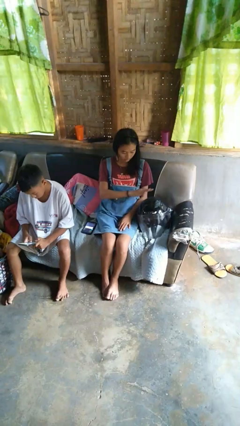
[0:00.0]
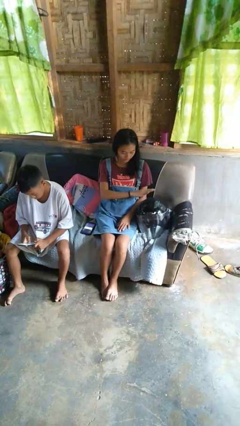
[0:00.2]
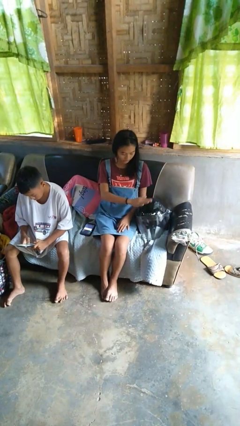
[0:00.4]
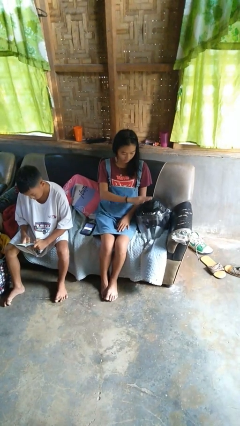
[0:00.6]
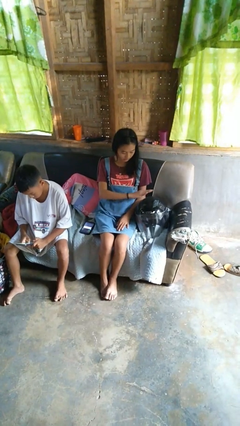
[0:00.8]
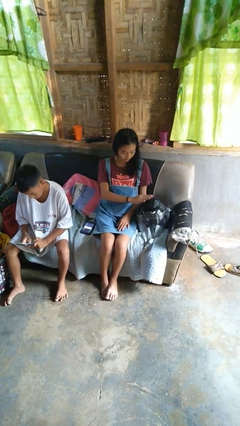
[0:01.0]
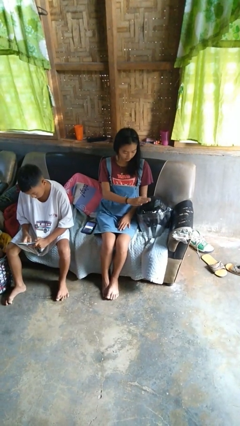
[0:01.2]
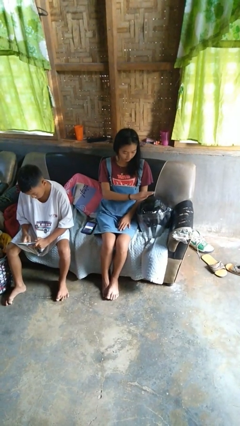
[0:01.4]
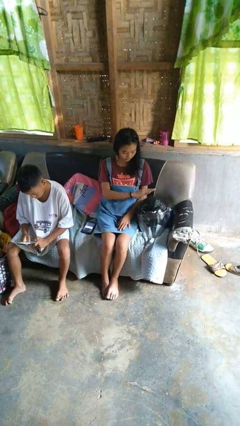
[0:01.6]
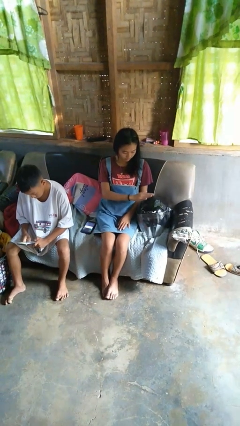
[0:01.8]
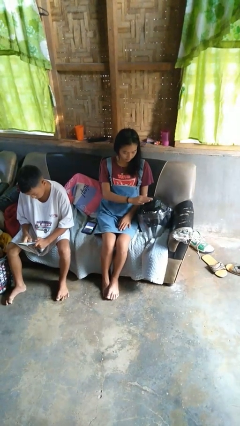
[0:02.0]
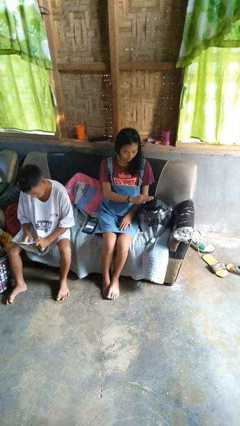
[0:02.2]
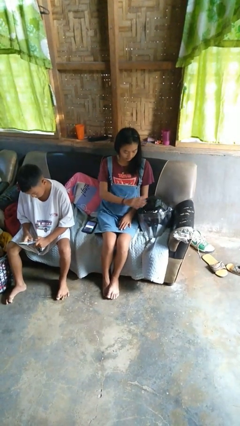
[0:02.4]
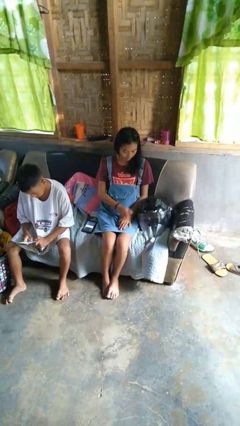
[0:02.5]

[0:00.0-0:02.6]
person waves hand over object

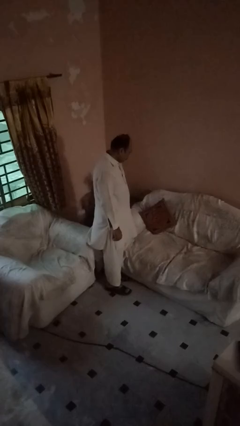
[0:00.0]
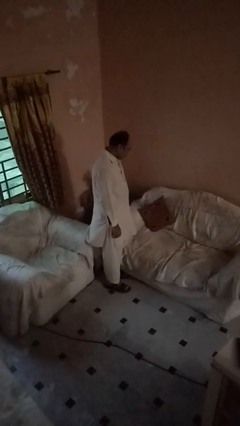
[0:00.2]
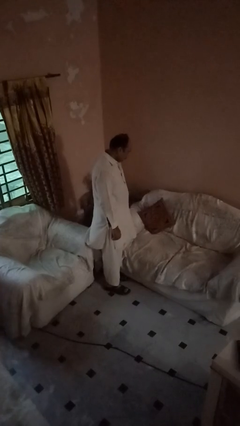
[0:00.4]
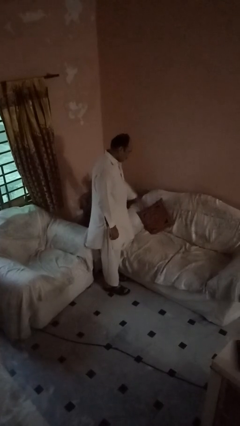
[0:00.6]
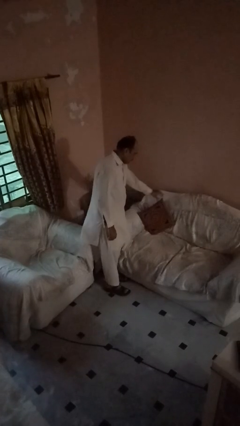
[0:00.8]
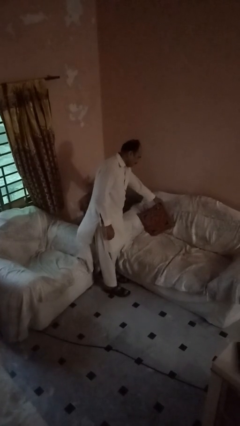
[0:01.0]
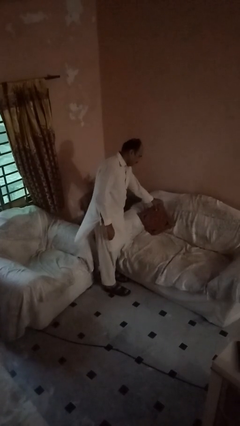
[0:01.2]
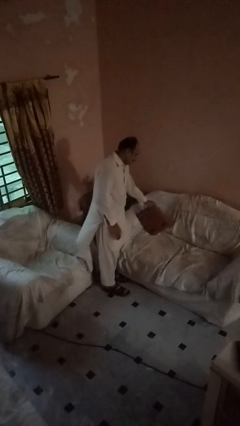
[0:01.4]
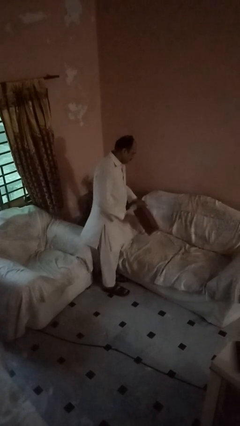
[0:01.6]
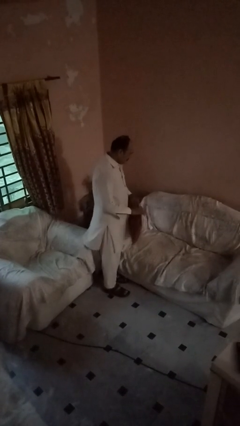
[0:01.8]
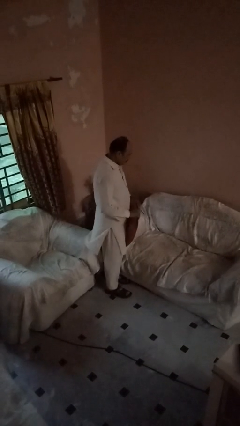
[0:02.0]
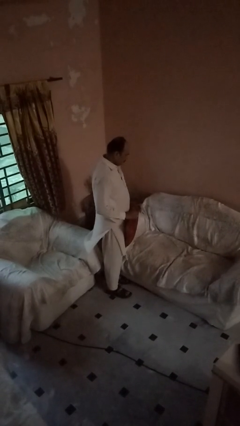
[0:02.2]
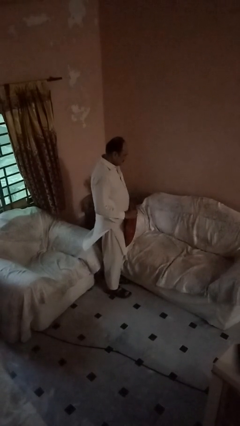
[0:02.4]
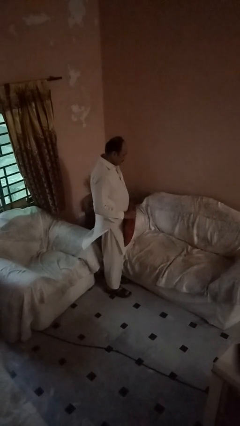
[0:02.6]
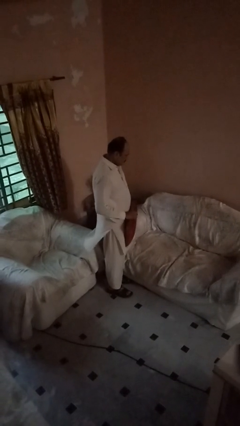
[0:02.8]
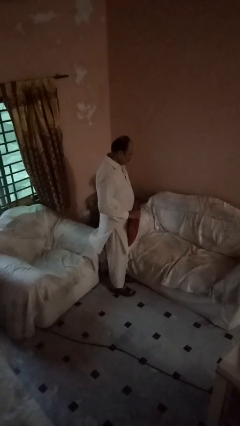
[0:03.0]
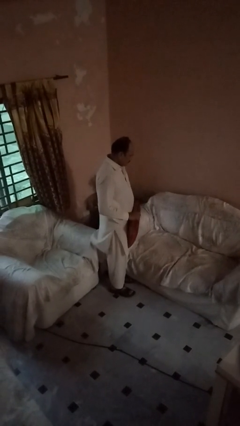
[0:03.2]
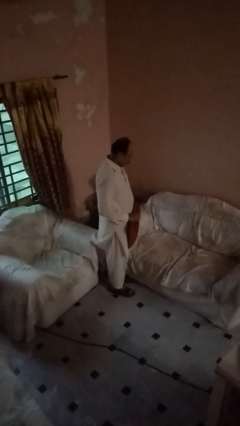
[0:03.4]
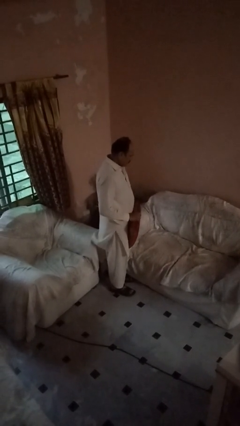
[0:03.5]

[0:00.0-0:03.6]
person picks up object from couch

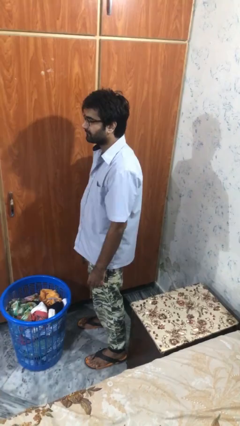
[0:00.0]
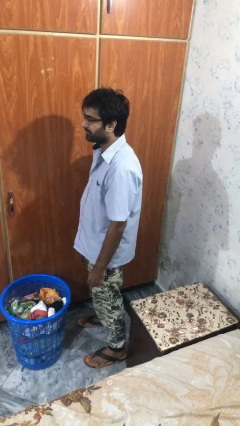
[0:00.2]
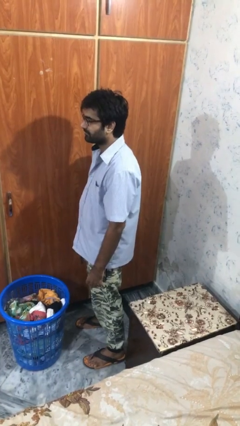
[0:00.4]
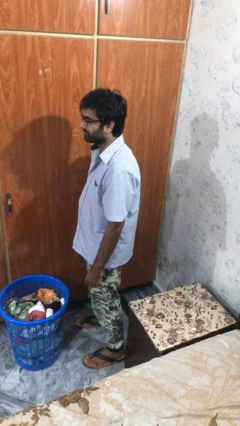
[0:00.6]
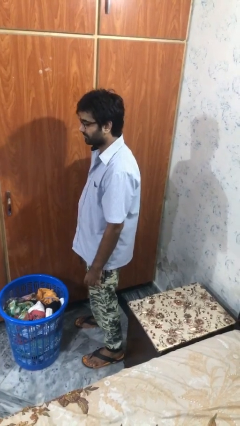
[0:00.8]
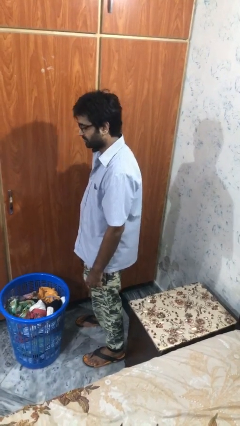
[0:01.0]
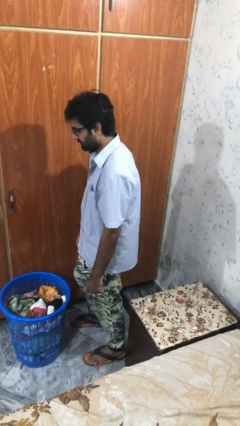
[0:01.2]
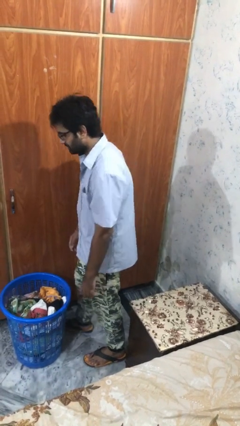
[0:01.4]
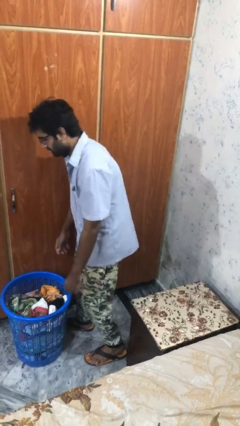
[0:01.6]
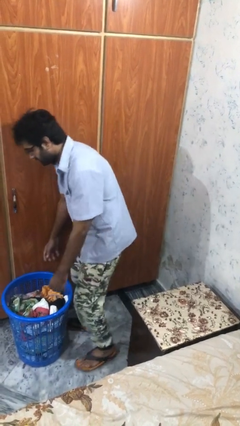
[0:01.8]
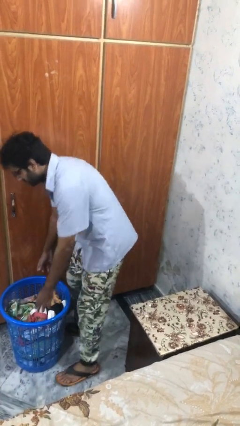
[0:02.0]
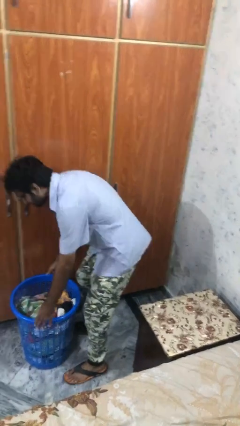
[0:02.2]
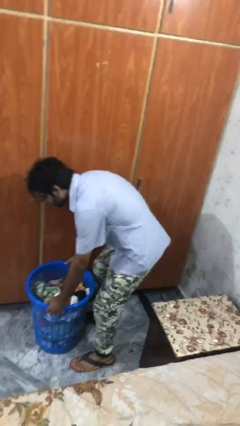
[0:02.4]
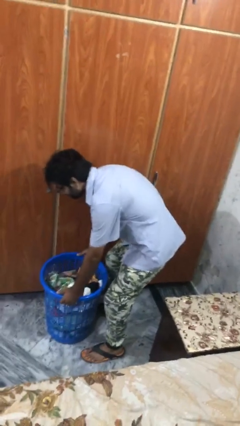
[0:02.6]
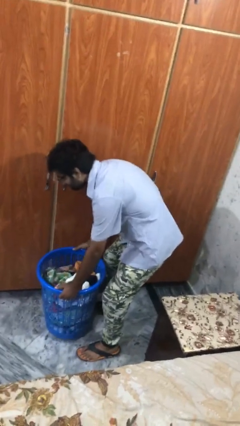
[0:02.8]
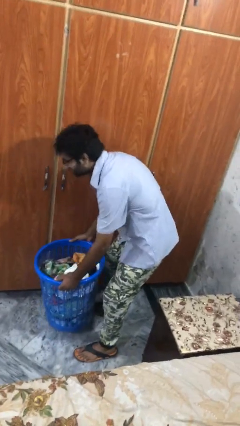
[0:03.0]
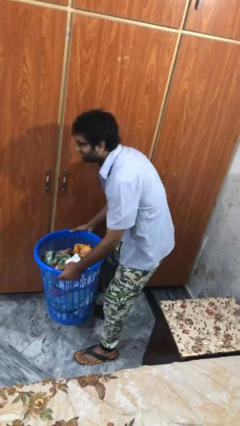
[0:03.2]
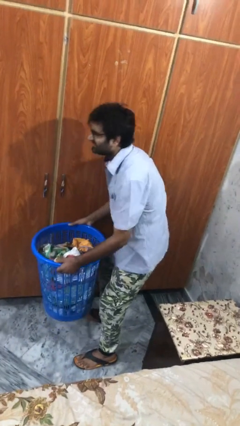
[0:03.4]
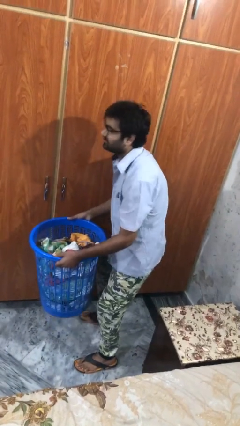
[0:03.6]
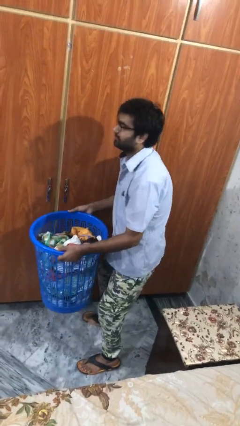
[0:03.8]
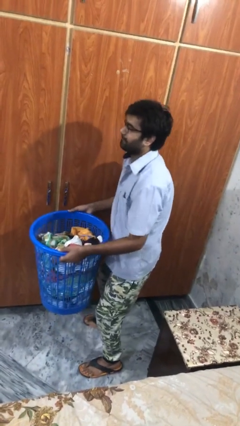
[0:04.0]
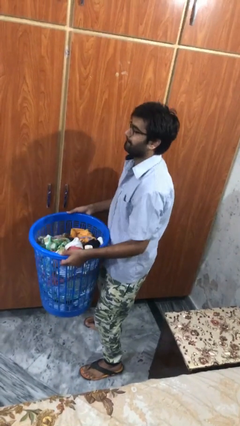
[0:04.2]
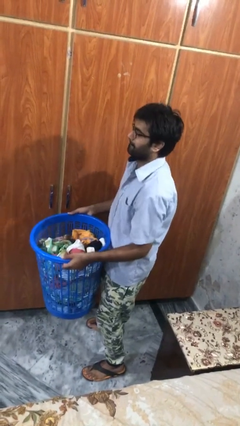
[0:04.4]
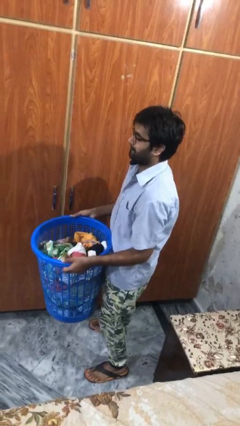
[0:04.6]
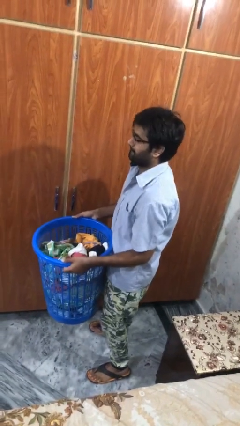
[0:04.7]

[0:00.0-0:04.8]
person picks up object from floor

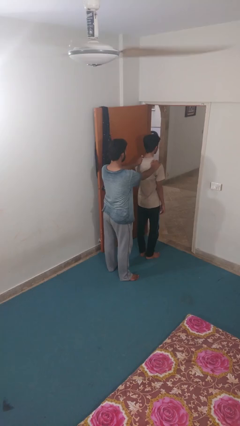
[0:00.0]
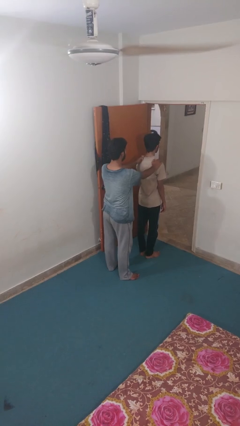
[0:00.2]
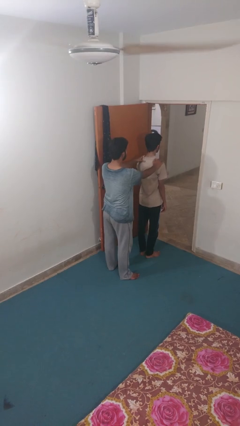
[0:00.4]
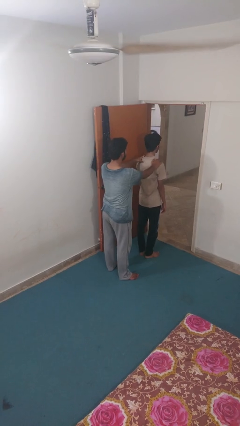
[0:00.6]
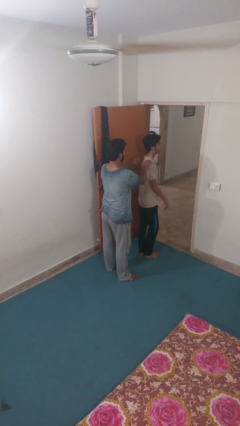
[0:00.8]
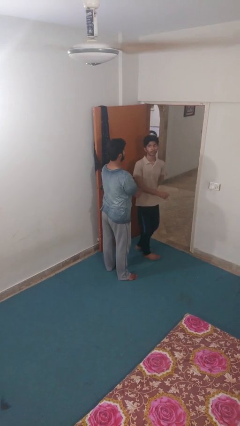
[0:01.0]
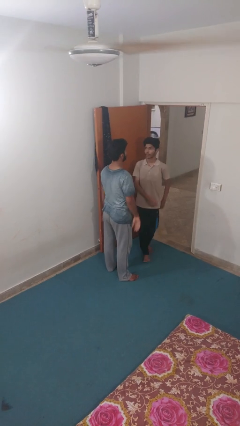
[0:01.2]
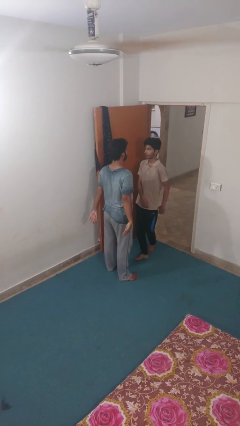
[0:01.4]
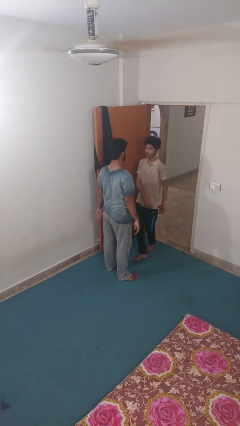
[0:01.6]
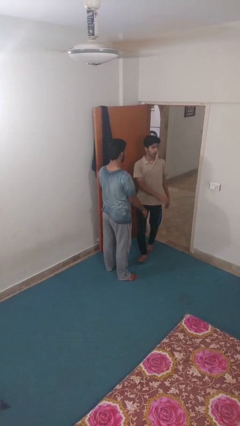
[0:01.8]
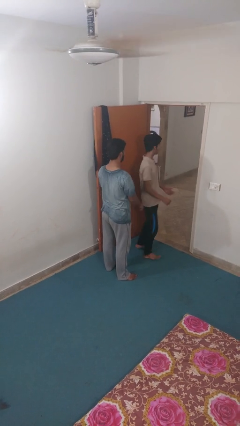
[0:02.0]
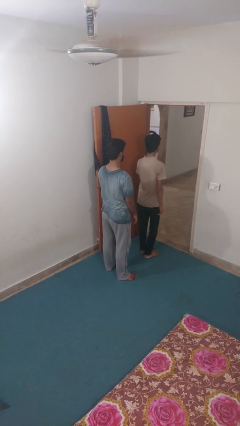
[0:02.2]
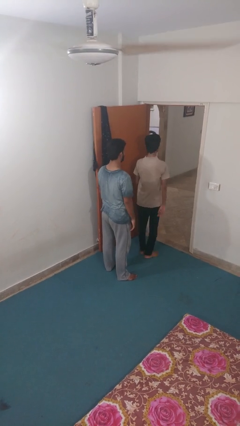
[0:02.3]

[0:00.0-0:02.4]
person spins person around

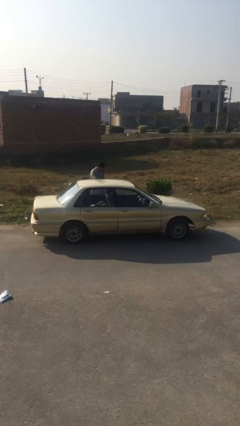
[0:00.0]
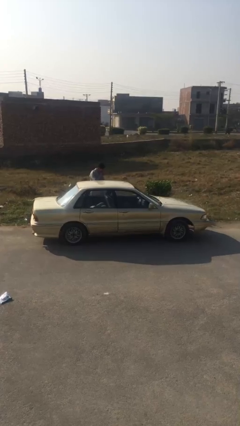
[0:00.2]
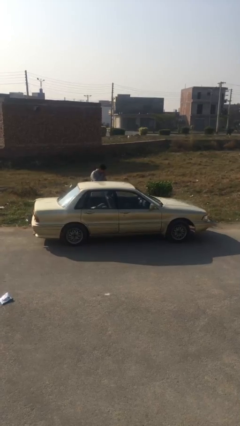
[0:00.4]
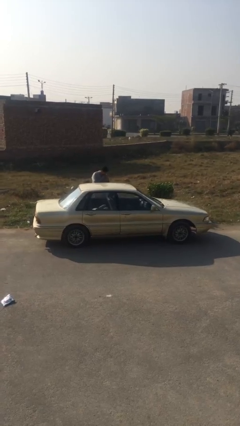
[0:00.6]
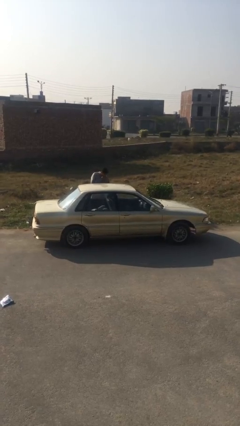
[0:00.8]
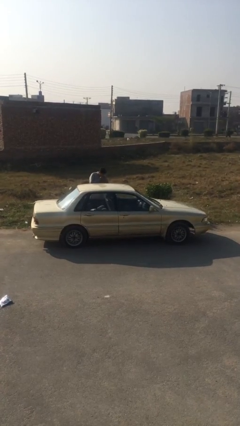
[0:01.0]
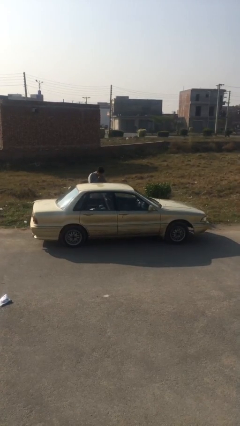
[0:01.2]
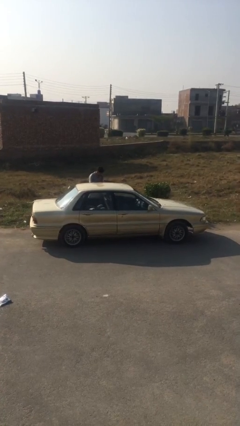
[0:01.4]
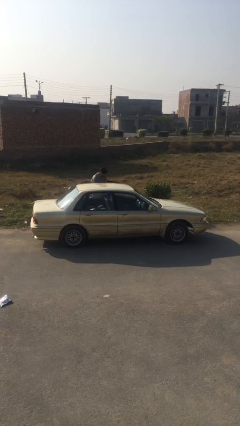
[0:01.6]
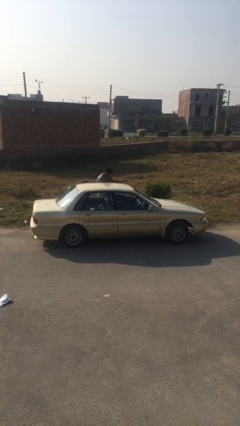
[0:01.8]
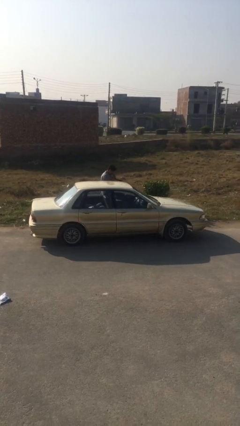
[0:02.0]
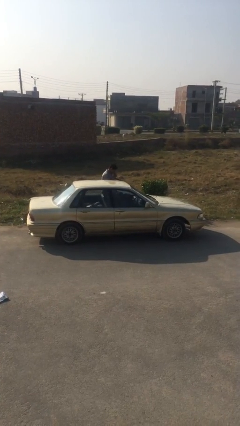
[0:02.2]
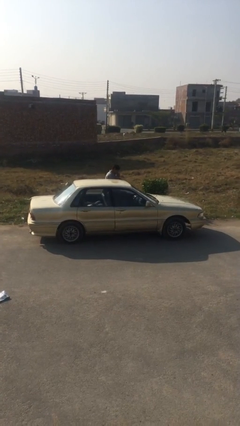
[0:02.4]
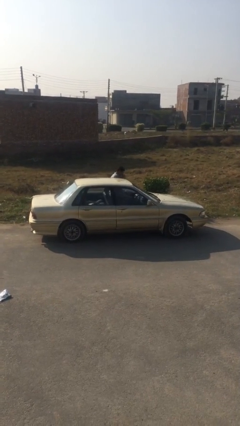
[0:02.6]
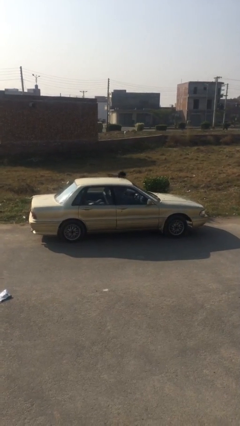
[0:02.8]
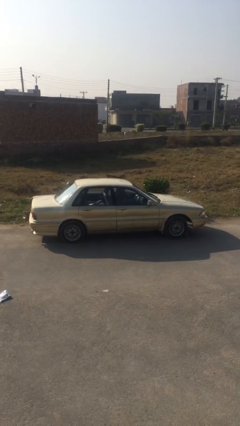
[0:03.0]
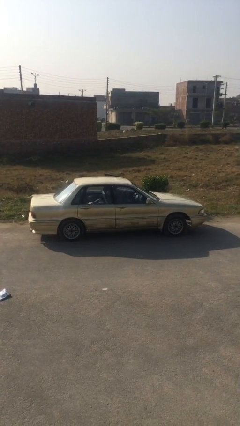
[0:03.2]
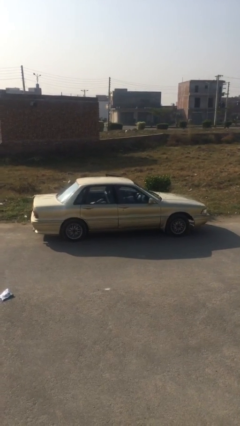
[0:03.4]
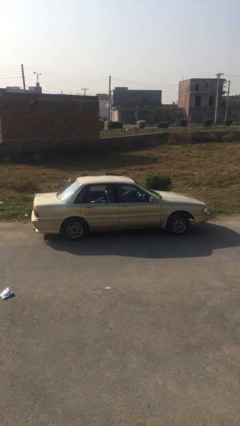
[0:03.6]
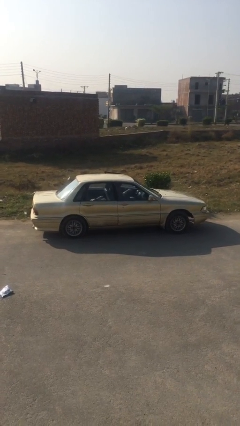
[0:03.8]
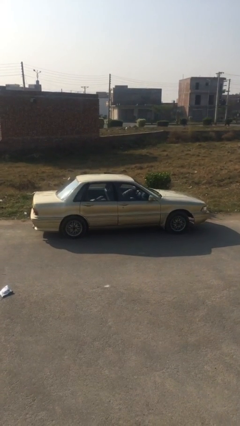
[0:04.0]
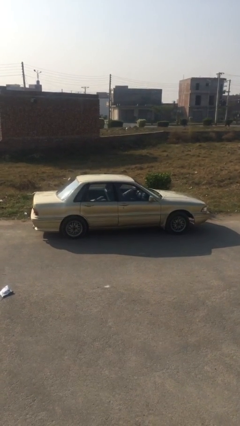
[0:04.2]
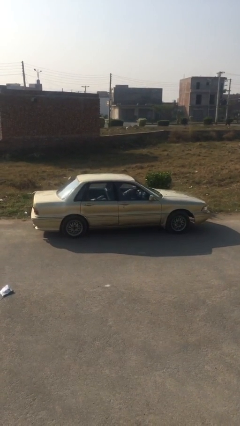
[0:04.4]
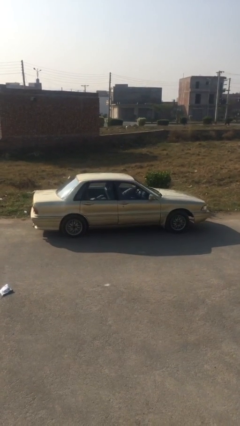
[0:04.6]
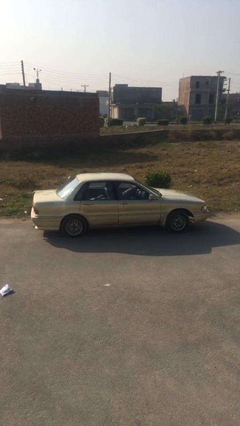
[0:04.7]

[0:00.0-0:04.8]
car picks up person
